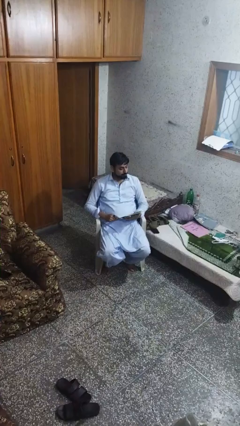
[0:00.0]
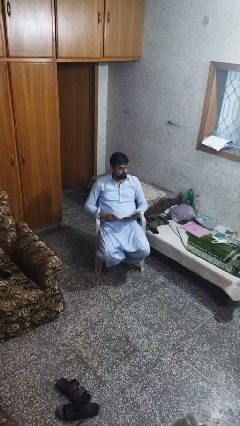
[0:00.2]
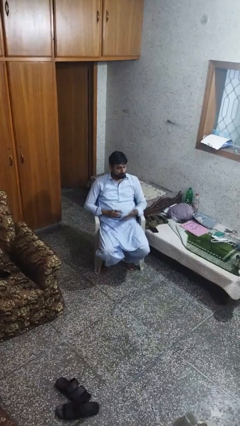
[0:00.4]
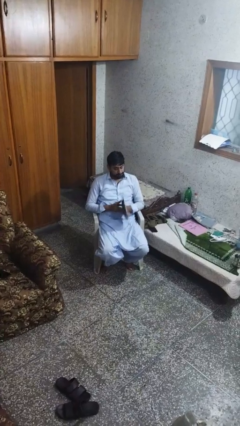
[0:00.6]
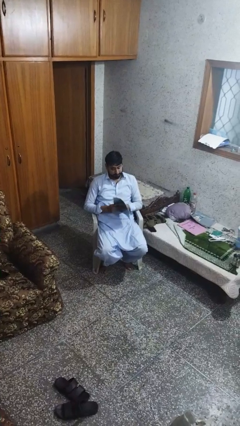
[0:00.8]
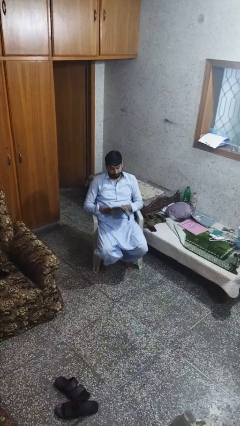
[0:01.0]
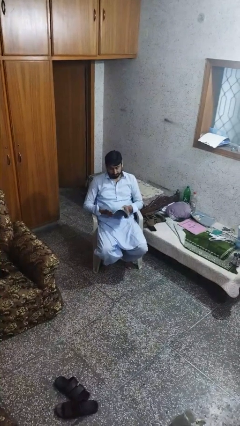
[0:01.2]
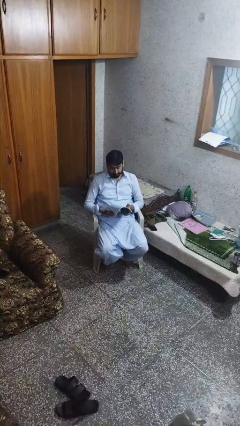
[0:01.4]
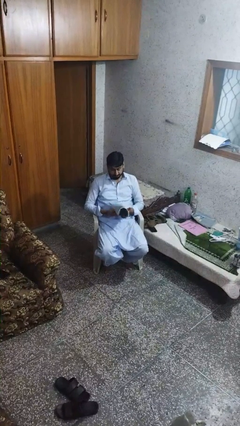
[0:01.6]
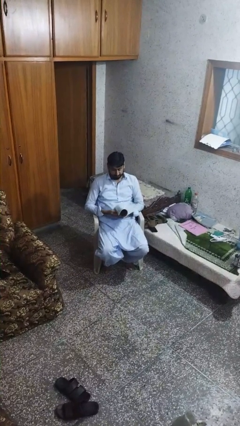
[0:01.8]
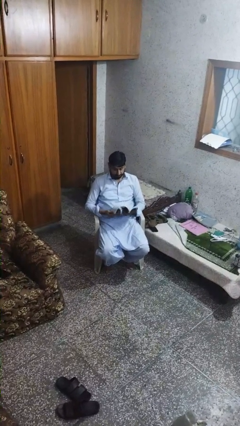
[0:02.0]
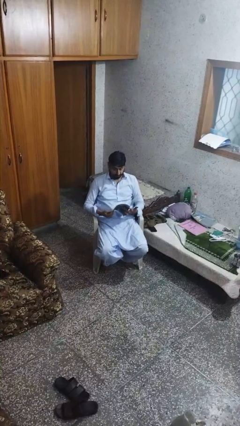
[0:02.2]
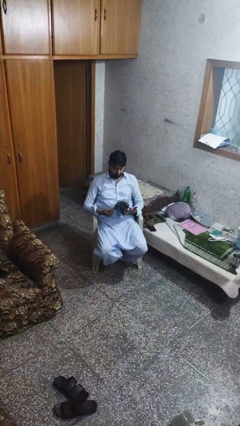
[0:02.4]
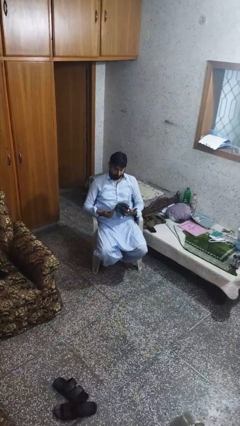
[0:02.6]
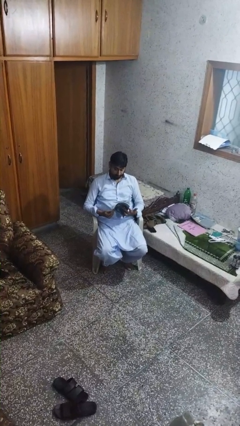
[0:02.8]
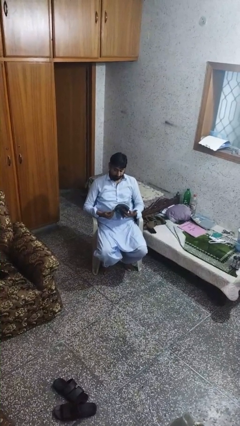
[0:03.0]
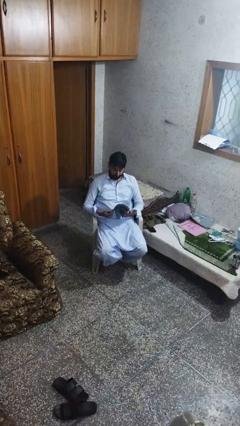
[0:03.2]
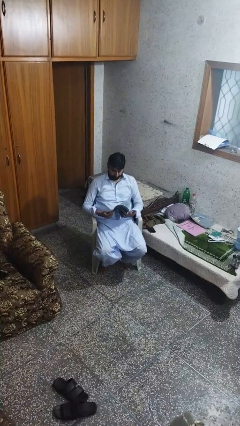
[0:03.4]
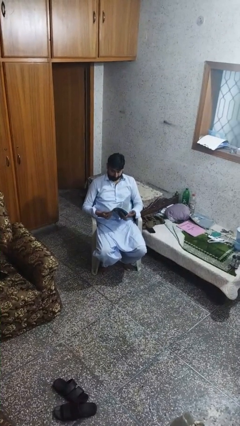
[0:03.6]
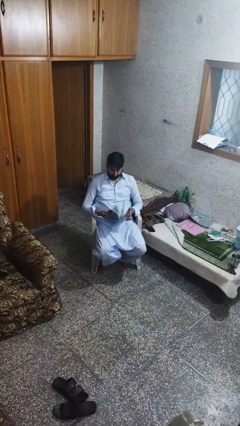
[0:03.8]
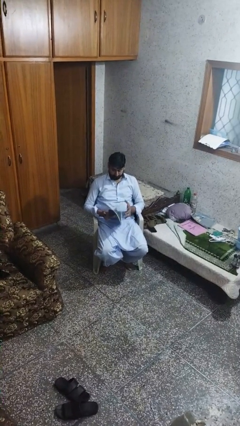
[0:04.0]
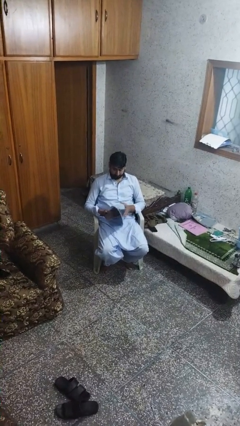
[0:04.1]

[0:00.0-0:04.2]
person reads magazine

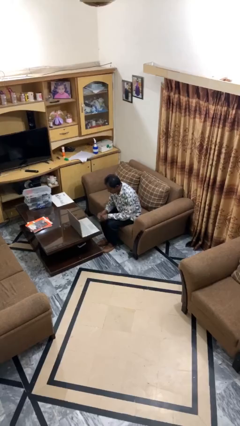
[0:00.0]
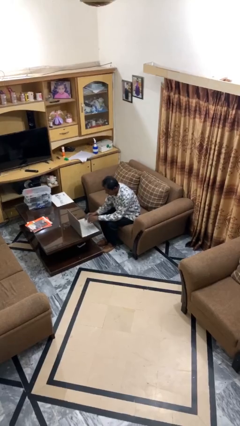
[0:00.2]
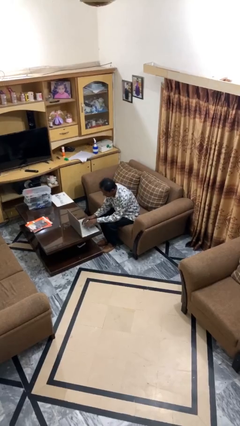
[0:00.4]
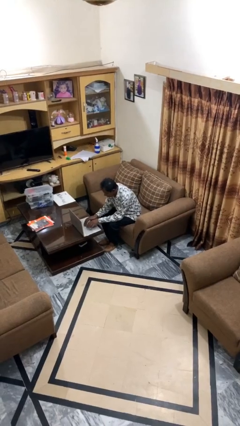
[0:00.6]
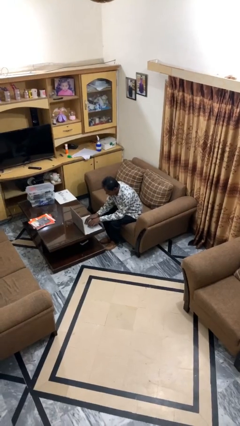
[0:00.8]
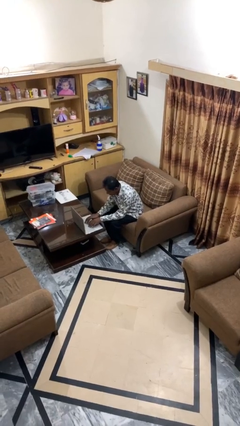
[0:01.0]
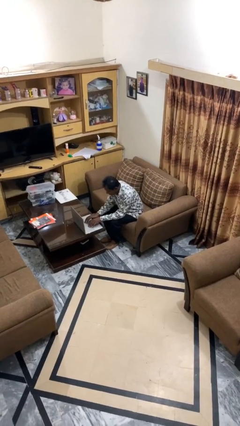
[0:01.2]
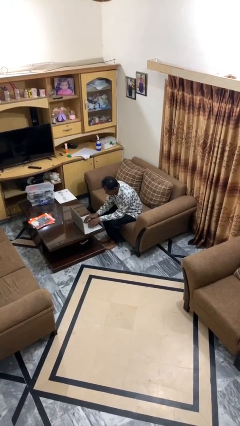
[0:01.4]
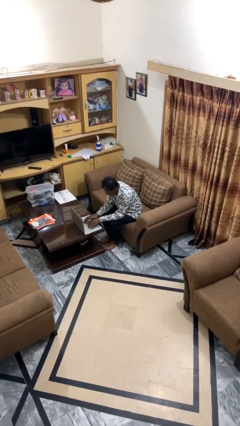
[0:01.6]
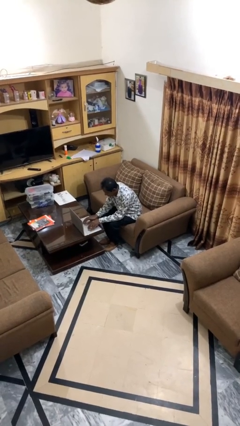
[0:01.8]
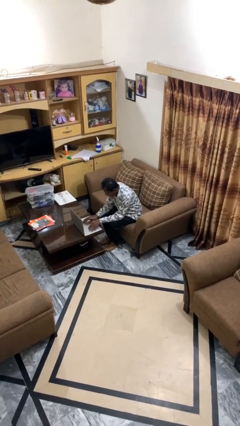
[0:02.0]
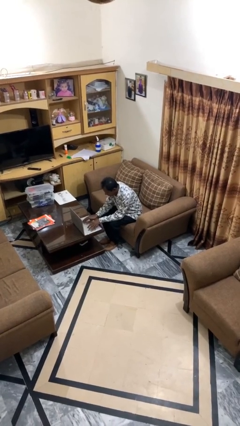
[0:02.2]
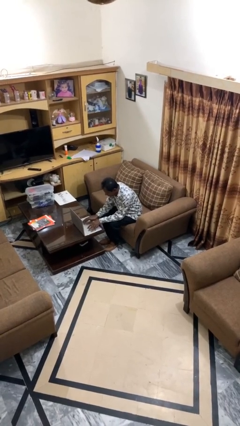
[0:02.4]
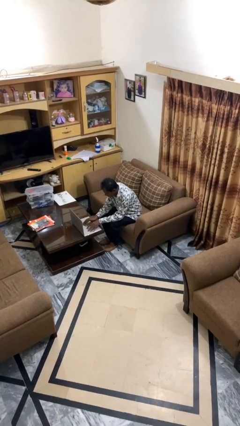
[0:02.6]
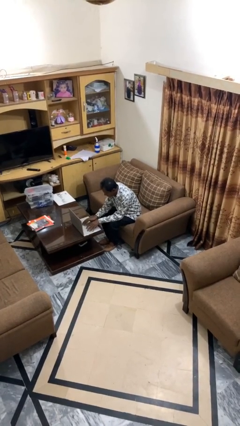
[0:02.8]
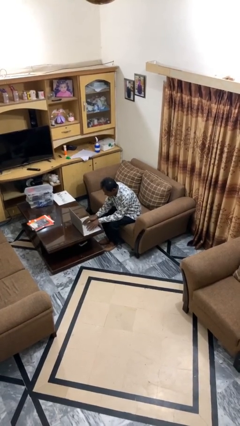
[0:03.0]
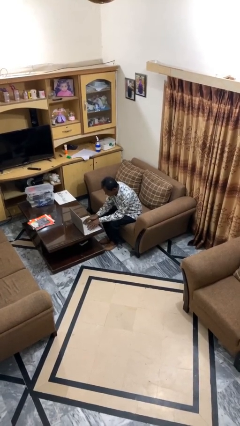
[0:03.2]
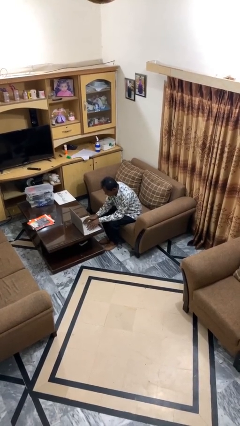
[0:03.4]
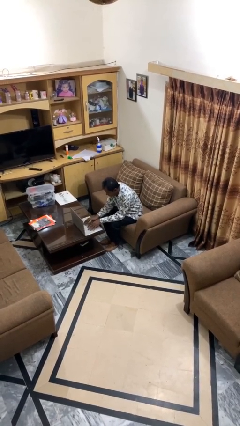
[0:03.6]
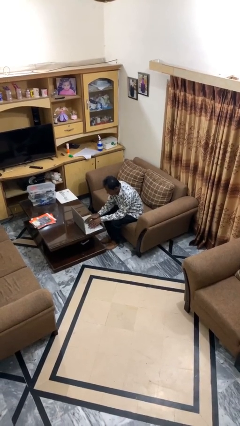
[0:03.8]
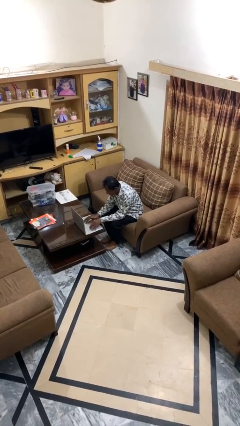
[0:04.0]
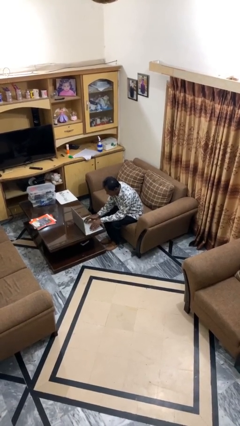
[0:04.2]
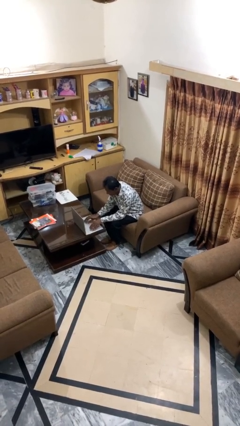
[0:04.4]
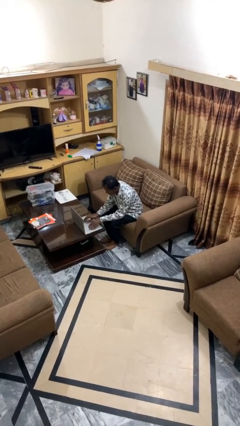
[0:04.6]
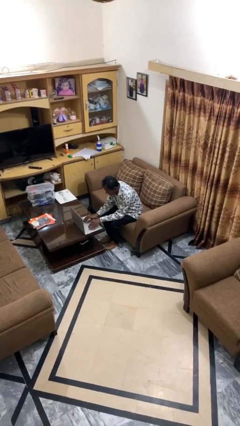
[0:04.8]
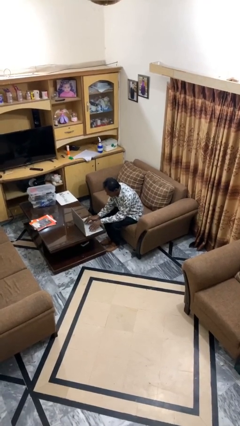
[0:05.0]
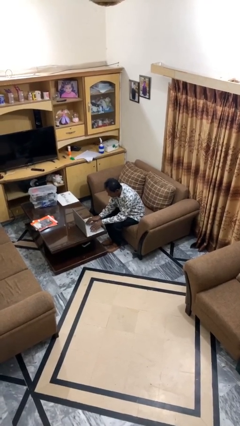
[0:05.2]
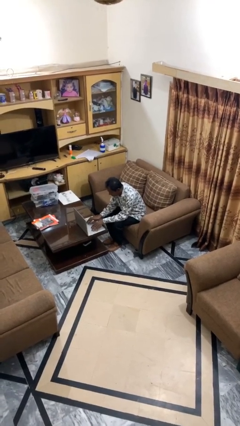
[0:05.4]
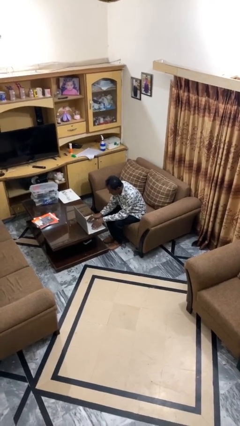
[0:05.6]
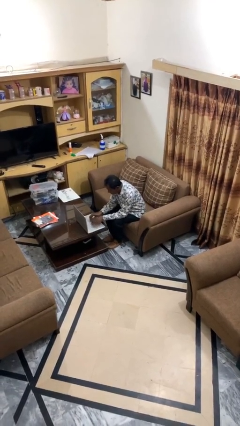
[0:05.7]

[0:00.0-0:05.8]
person interacts with laptop

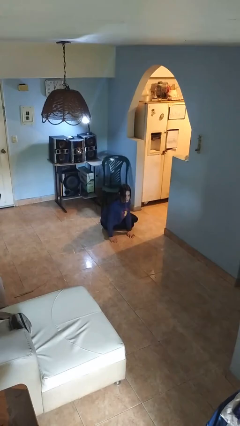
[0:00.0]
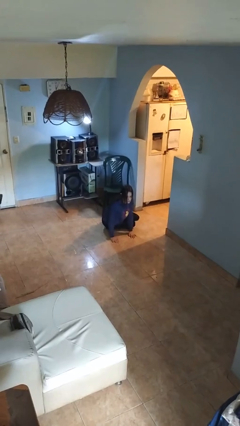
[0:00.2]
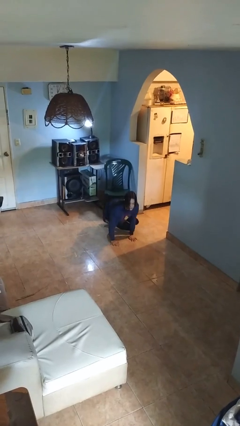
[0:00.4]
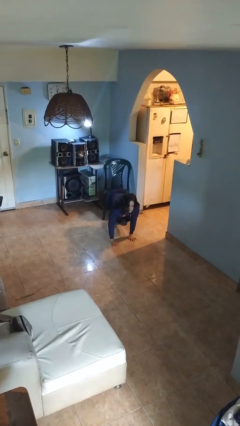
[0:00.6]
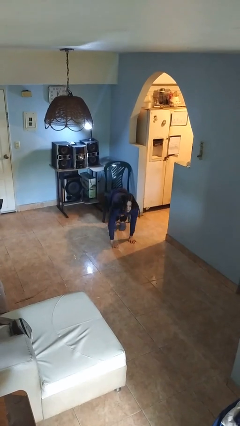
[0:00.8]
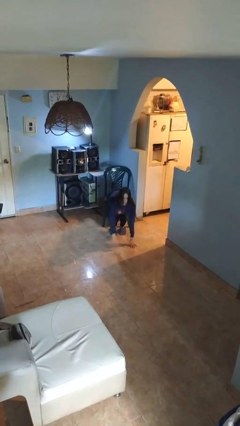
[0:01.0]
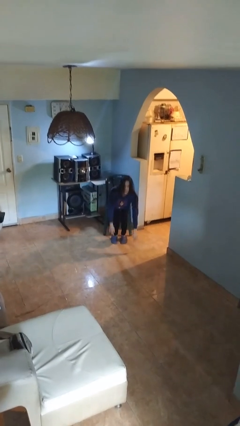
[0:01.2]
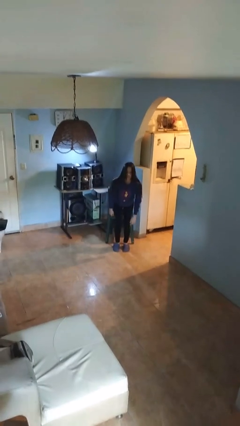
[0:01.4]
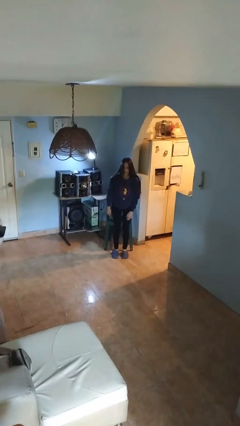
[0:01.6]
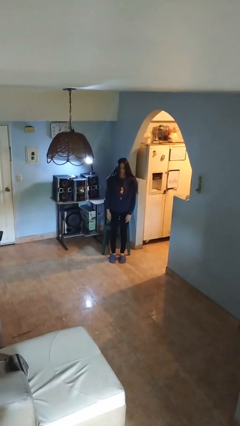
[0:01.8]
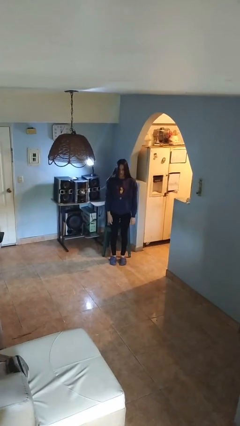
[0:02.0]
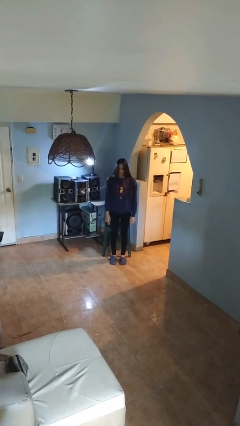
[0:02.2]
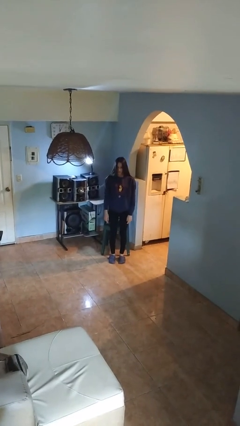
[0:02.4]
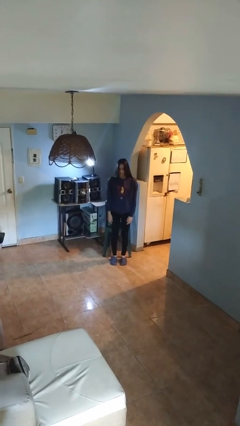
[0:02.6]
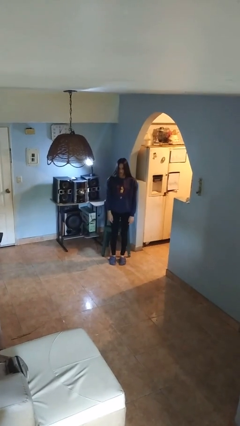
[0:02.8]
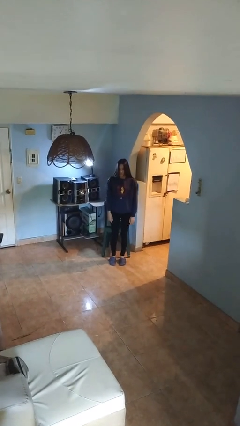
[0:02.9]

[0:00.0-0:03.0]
person stands up from floor

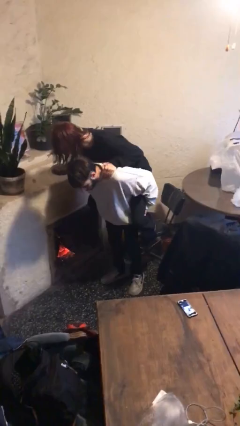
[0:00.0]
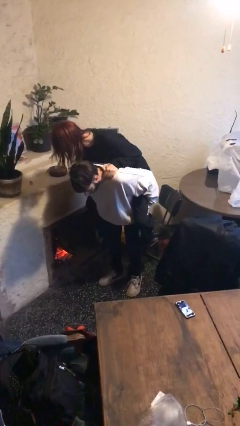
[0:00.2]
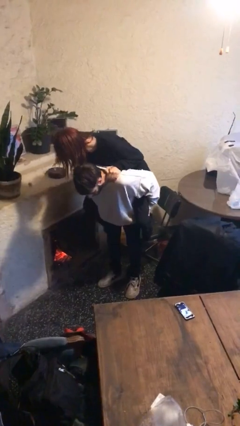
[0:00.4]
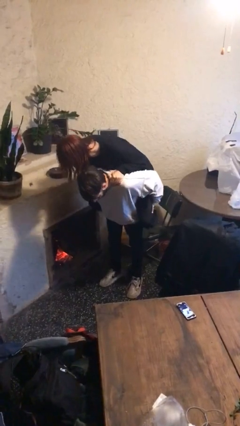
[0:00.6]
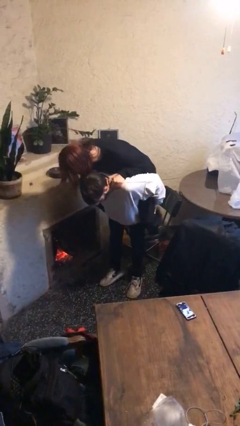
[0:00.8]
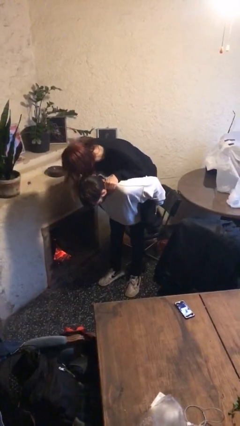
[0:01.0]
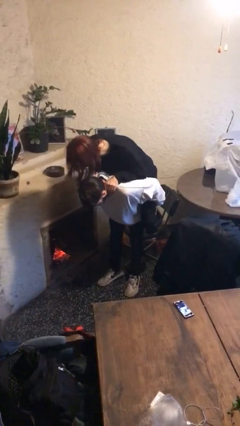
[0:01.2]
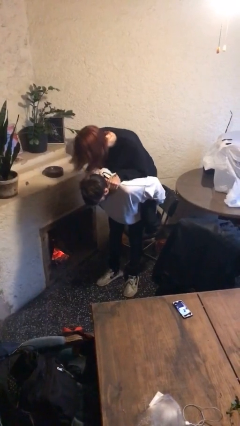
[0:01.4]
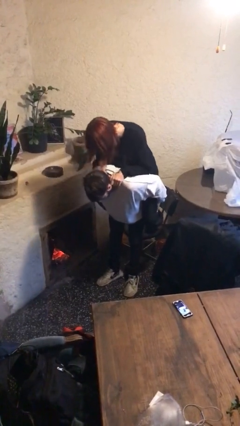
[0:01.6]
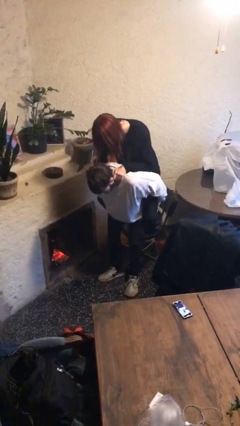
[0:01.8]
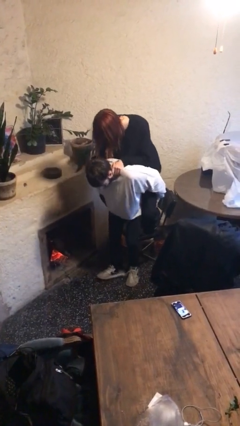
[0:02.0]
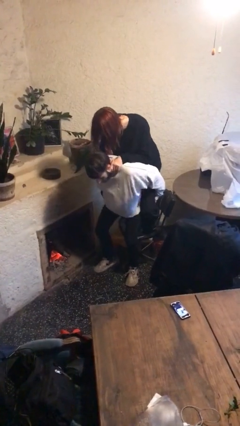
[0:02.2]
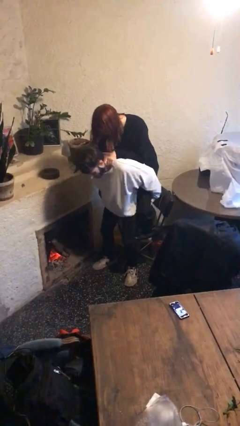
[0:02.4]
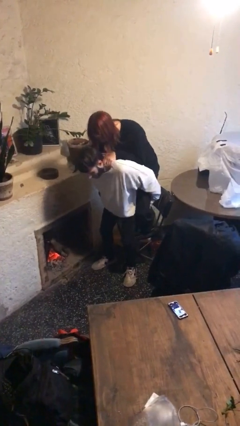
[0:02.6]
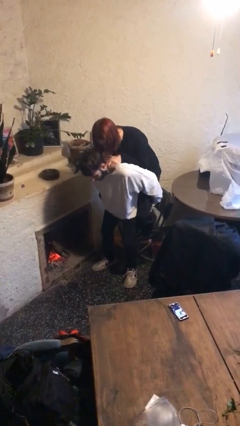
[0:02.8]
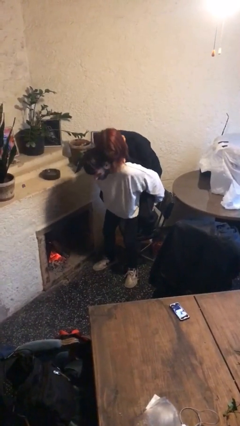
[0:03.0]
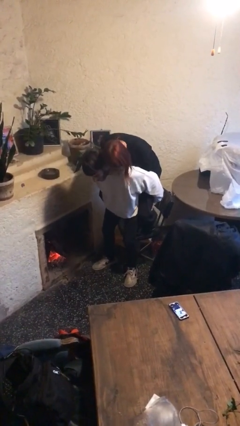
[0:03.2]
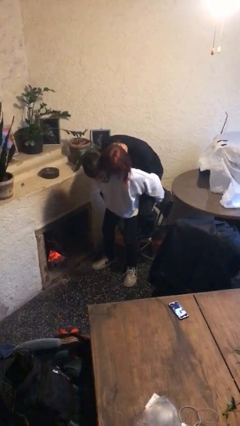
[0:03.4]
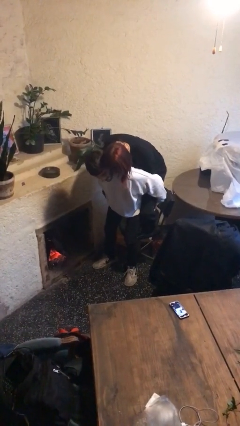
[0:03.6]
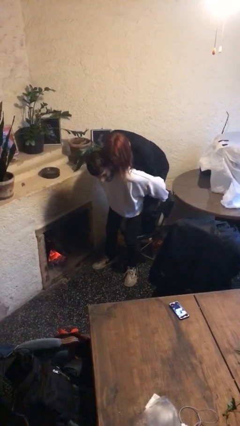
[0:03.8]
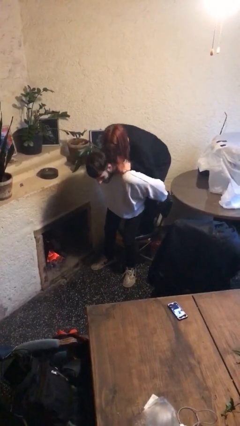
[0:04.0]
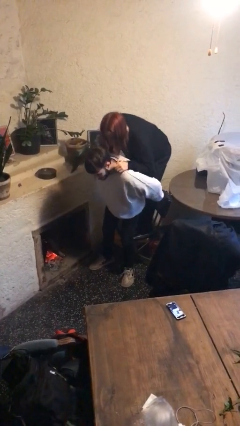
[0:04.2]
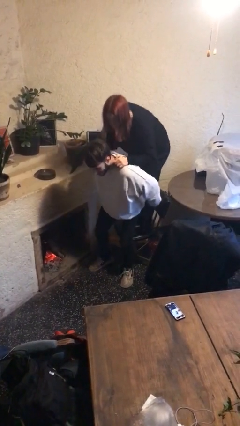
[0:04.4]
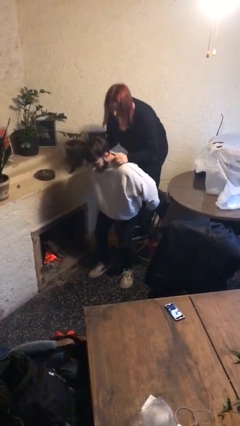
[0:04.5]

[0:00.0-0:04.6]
person puts down person

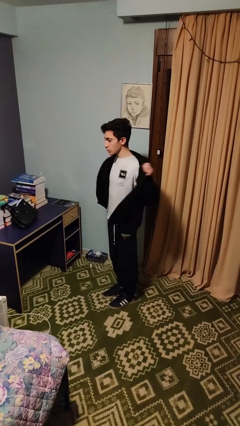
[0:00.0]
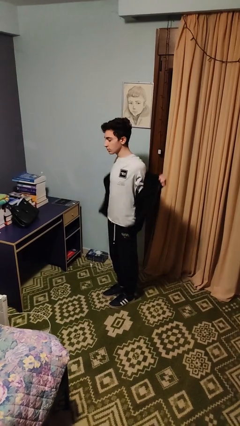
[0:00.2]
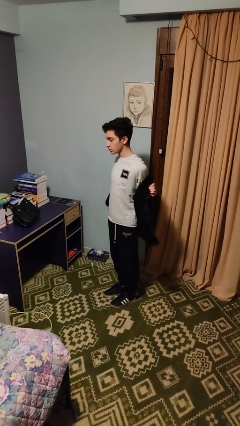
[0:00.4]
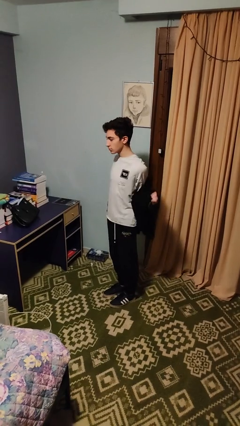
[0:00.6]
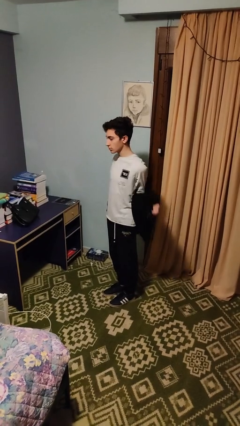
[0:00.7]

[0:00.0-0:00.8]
person takes off jacket
